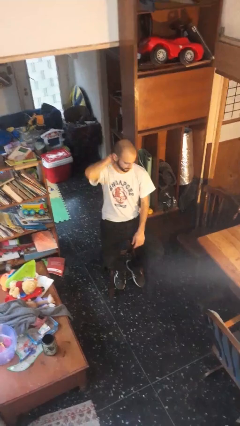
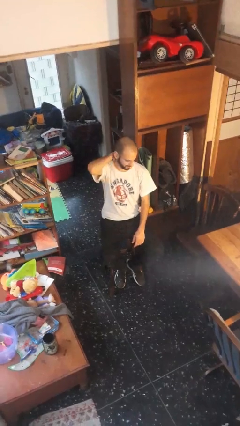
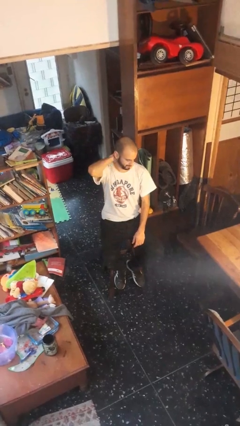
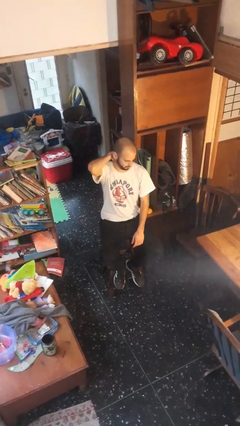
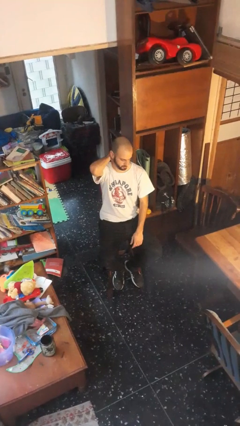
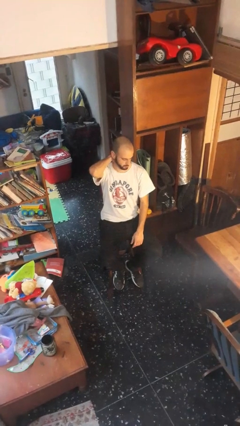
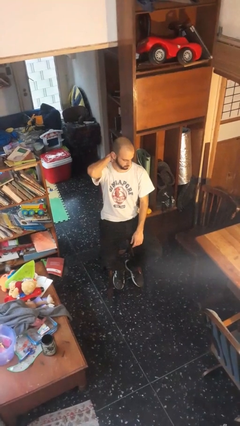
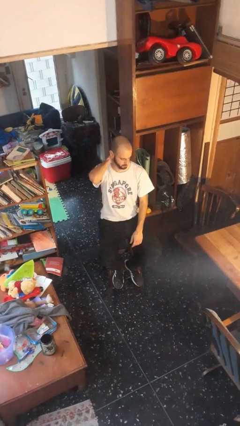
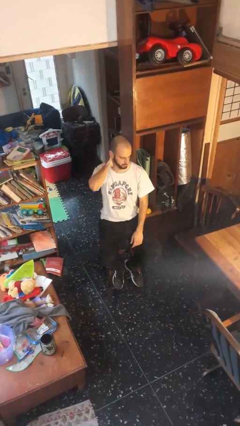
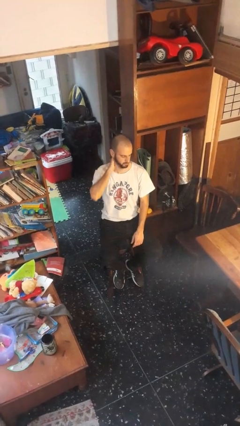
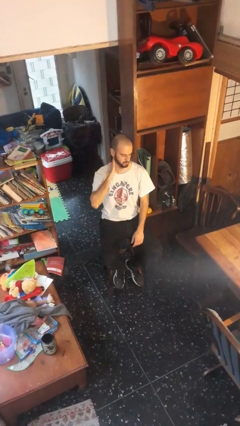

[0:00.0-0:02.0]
person rubs neck

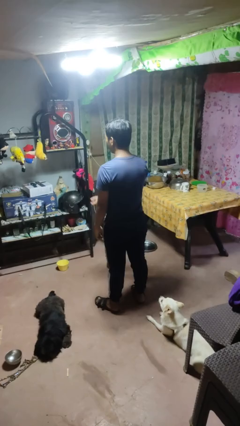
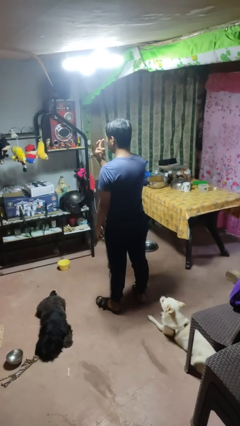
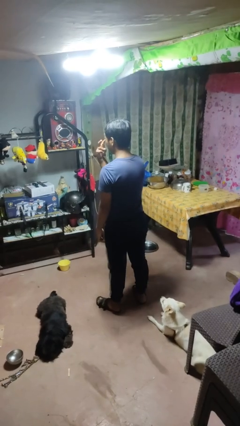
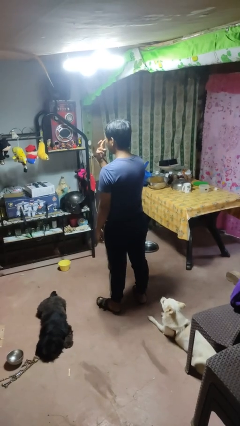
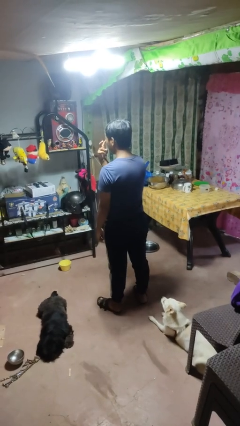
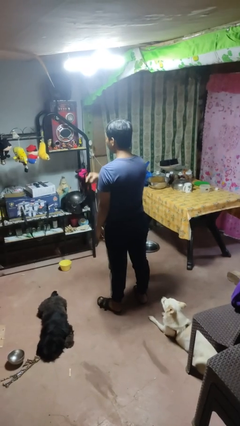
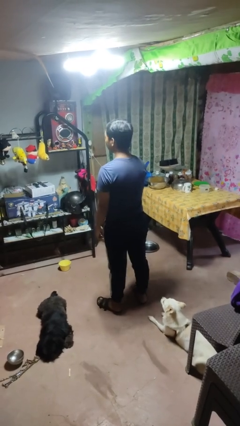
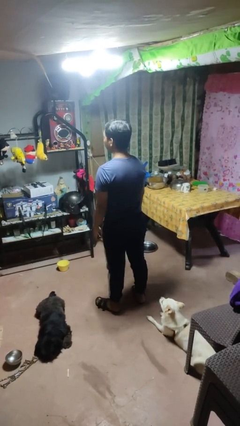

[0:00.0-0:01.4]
person gestures watch closely

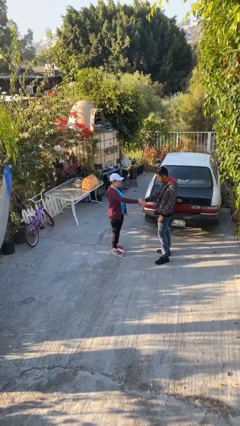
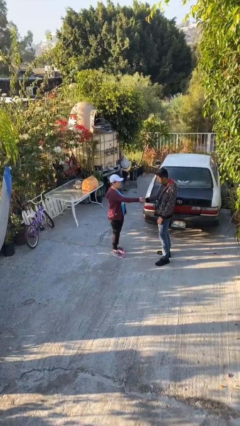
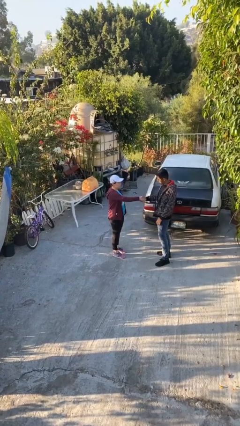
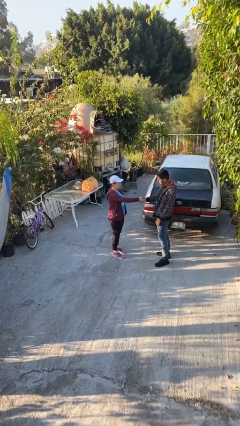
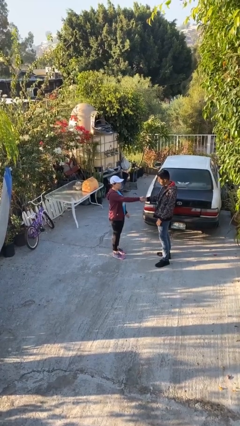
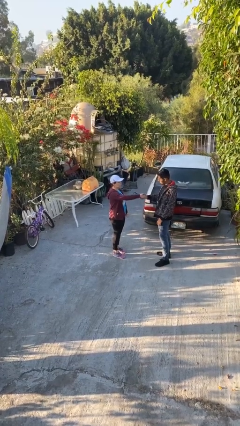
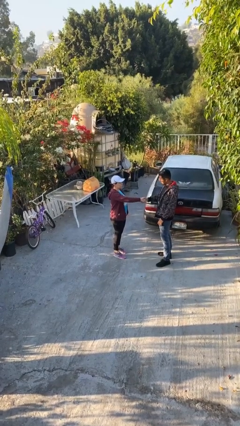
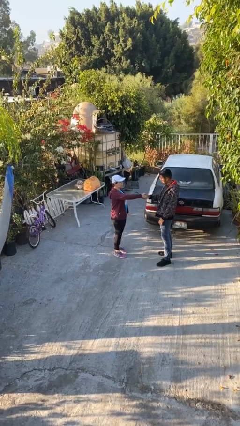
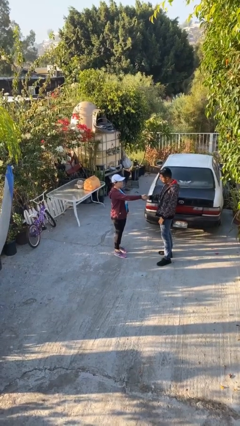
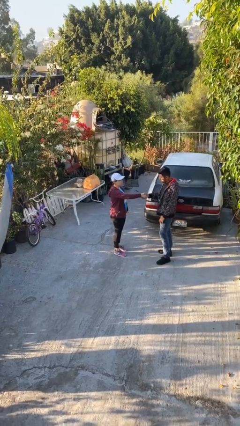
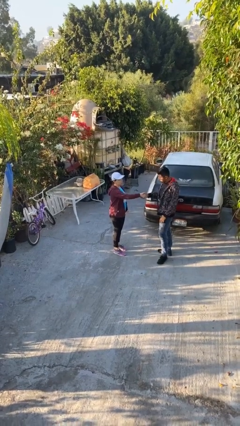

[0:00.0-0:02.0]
person shakes hand

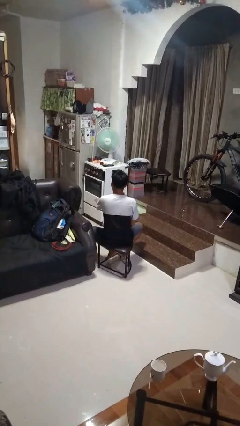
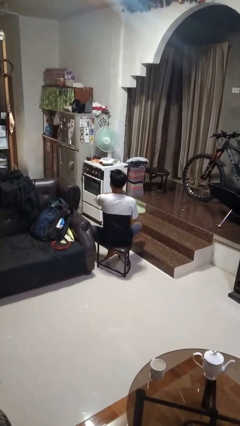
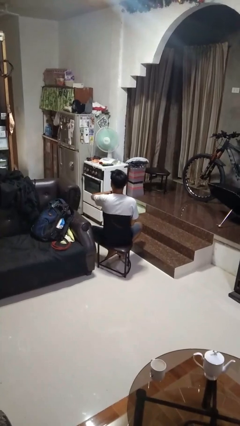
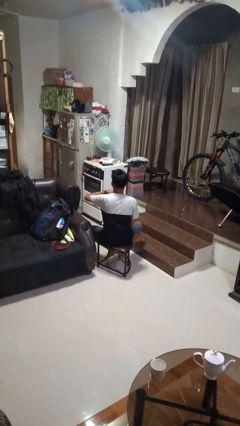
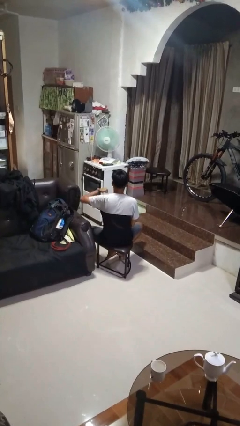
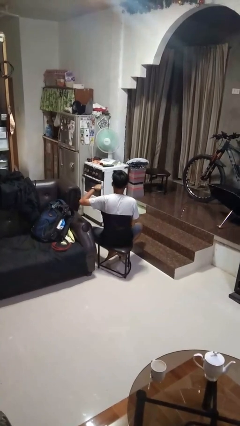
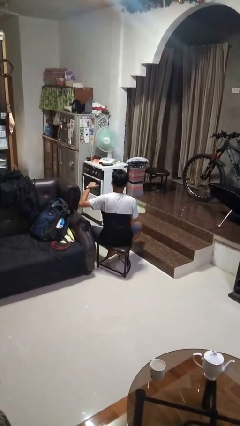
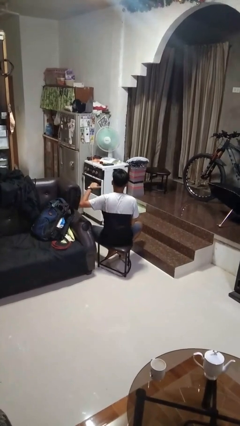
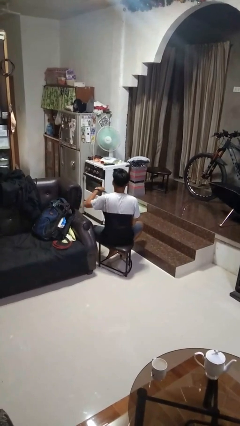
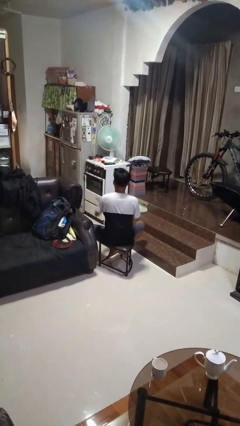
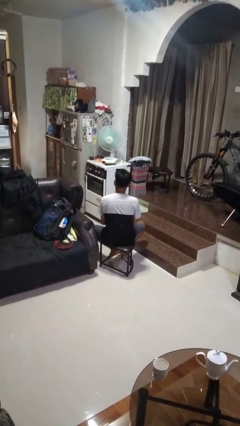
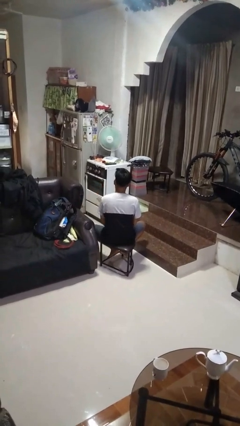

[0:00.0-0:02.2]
person gestures cut

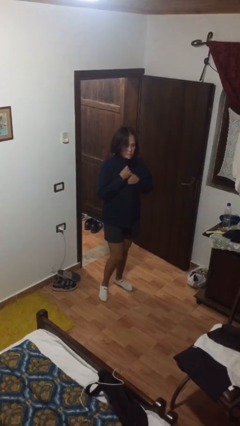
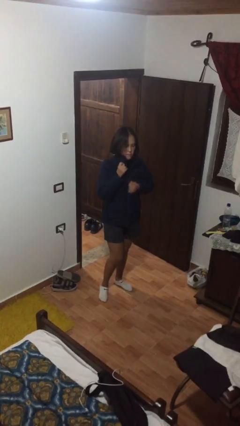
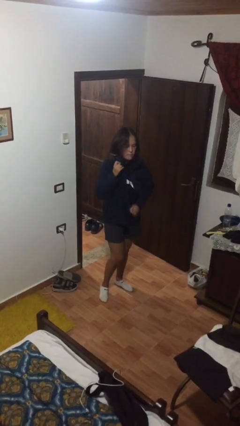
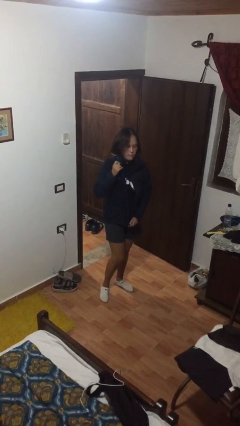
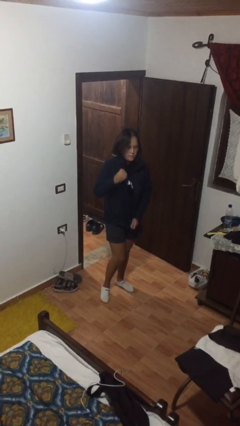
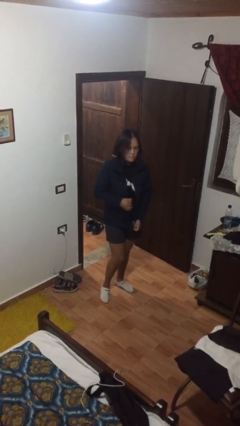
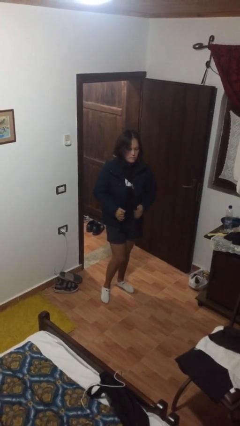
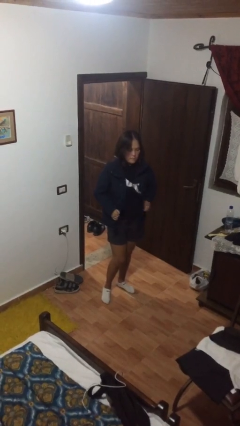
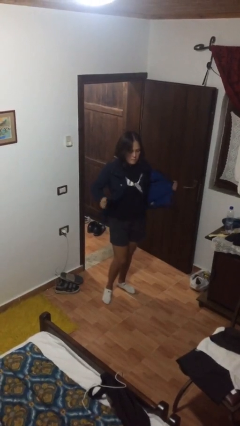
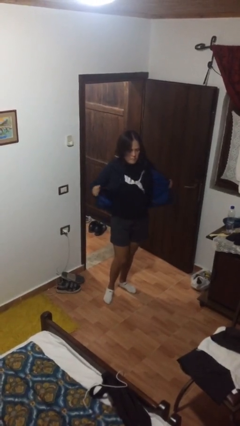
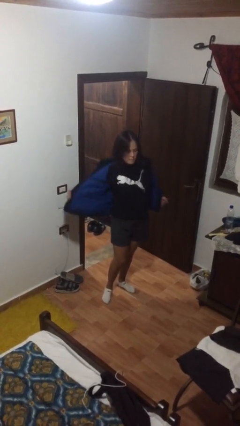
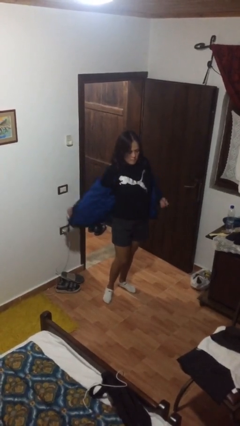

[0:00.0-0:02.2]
person unzips jacket

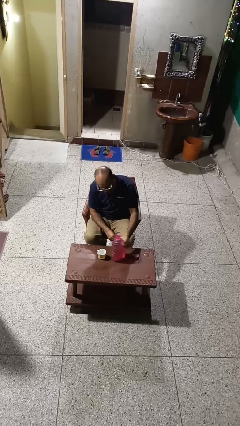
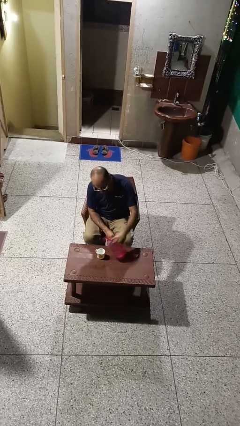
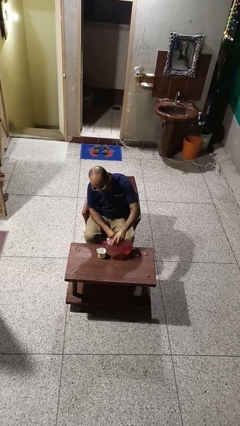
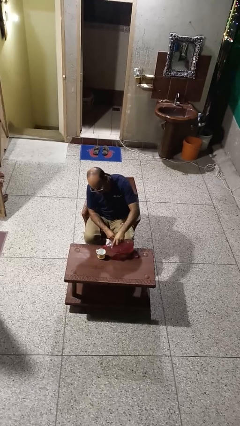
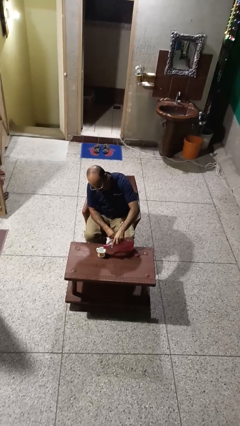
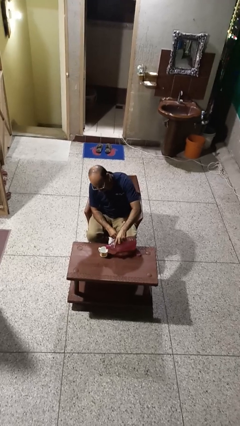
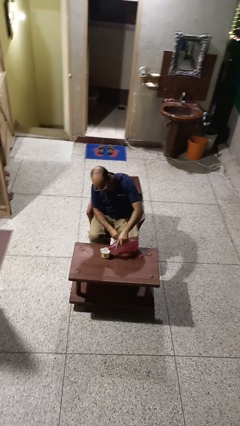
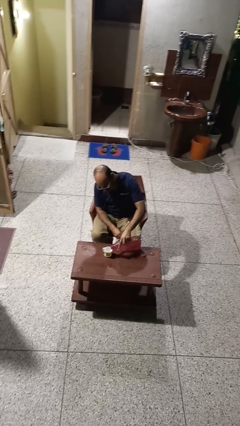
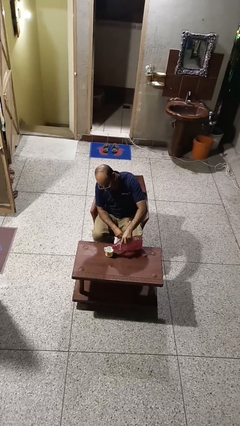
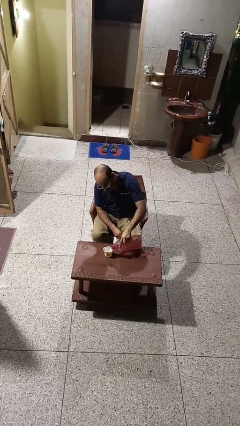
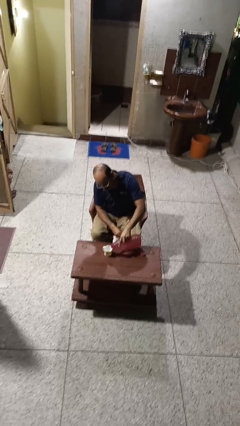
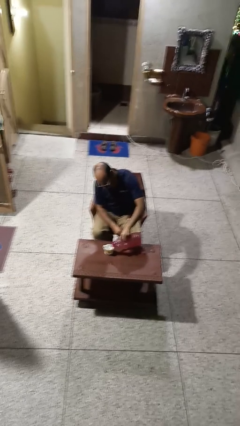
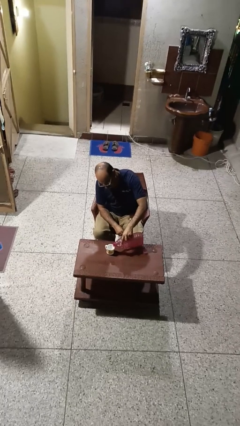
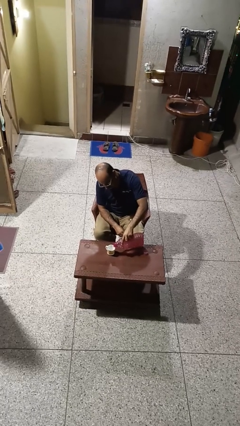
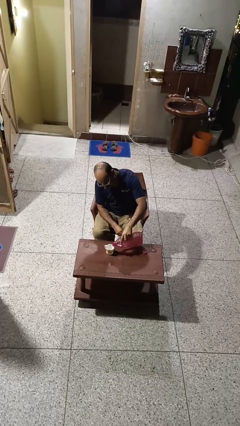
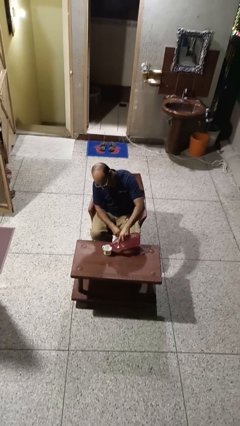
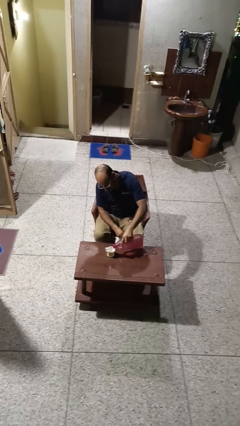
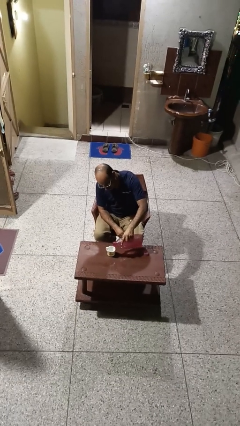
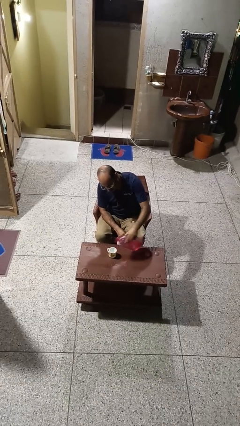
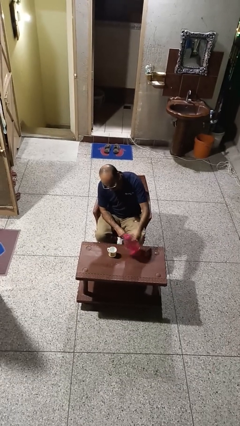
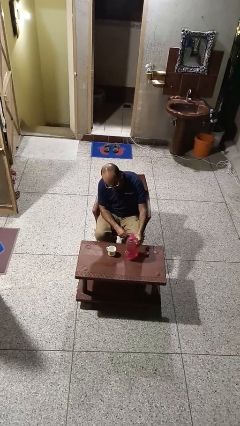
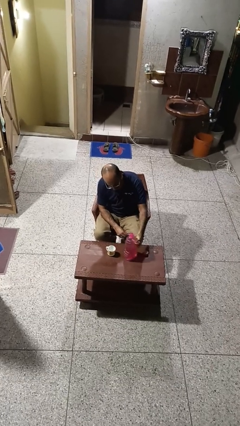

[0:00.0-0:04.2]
person pours liquid into cup

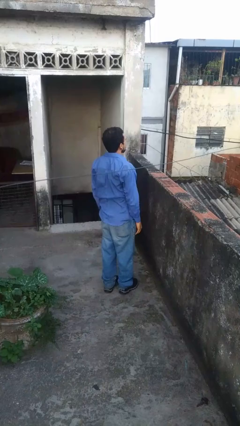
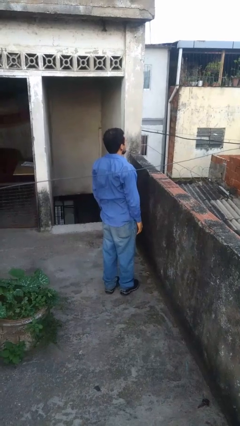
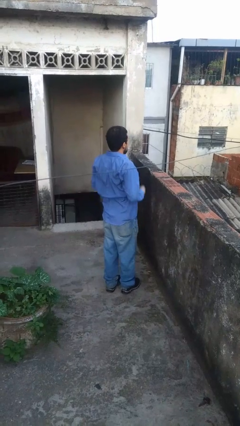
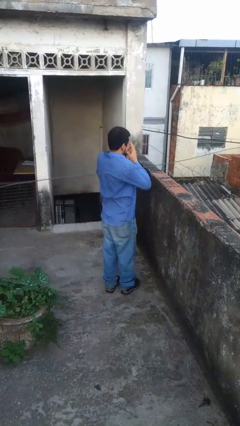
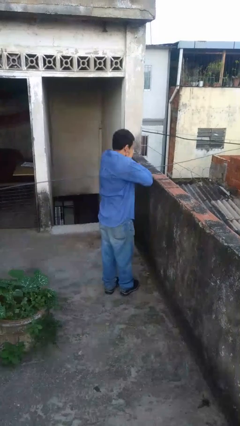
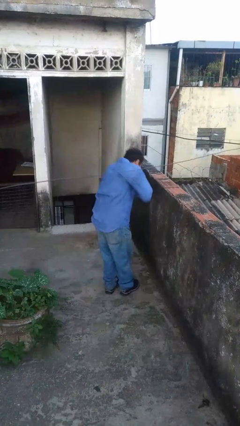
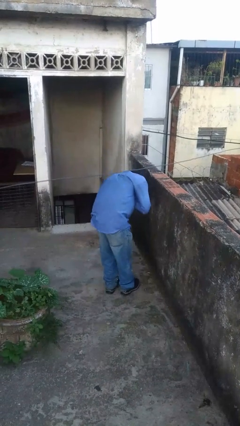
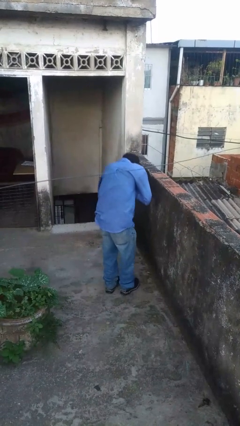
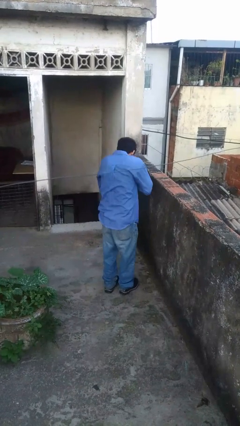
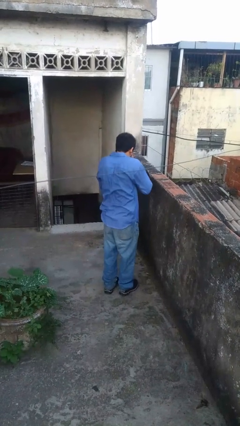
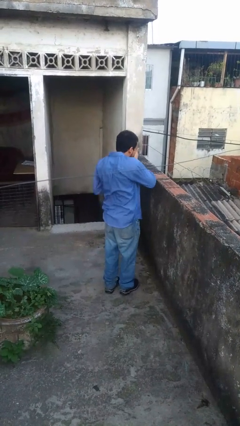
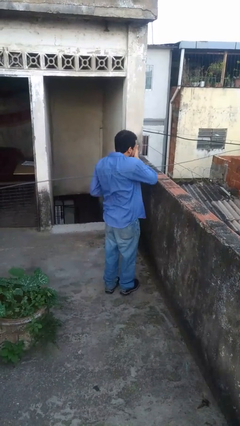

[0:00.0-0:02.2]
person sneezes into hand

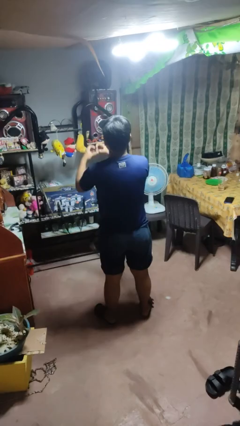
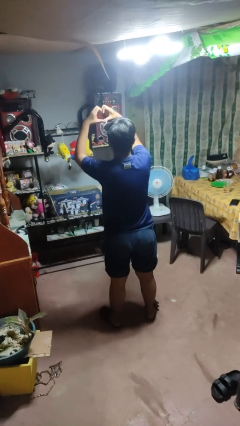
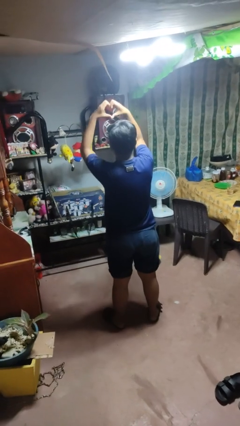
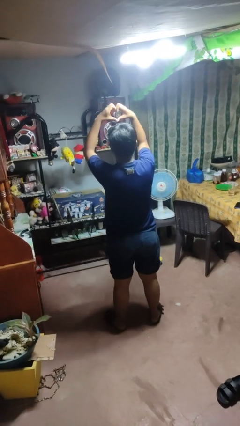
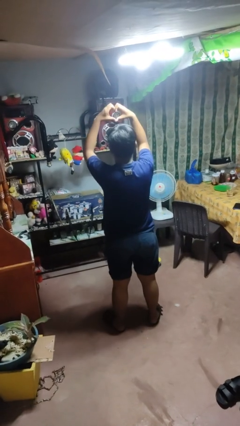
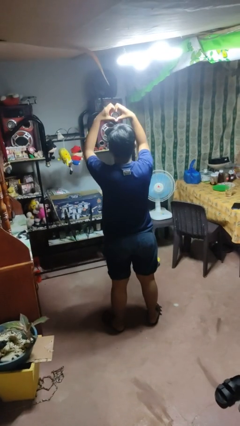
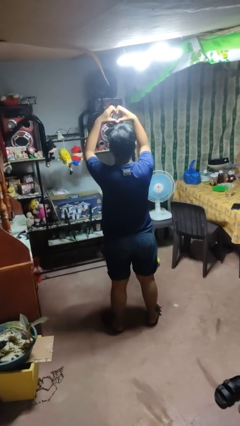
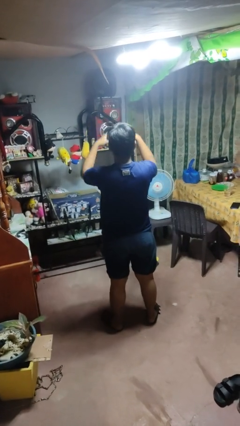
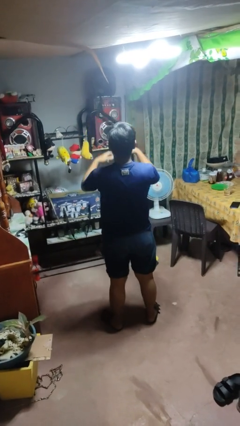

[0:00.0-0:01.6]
person gestures heart
